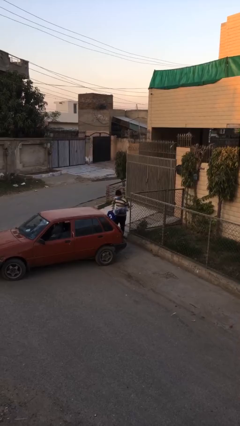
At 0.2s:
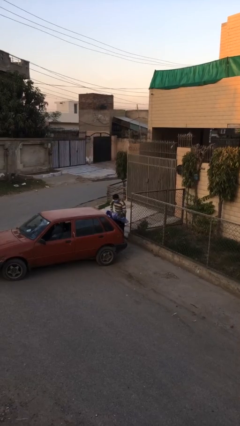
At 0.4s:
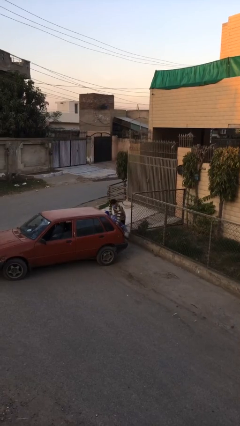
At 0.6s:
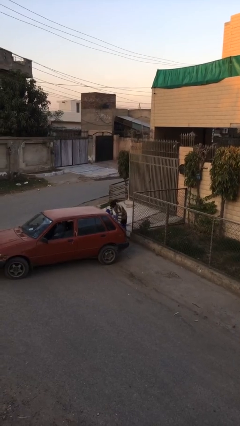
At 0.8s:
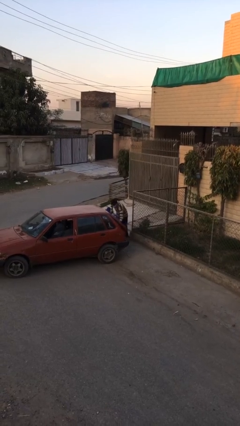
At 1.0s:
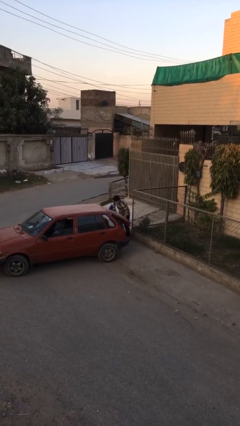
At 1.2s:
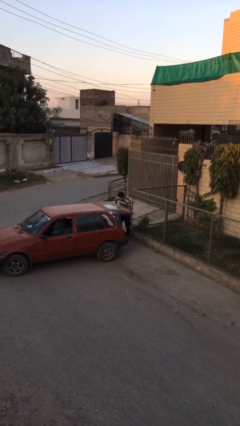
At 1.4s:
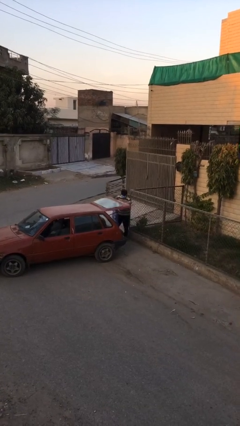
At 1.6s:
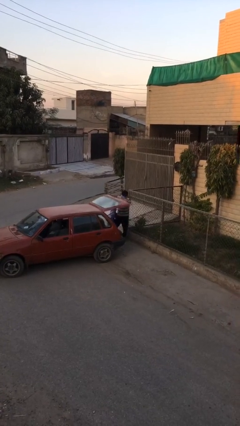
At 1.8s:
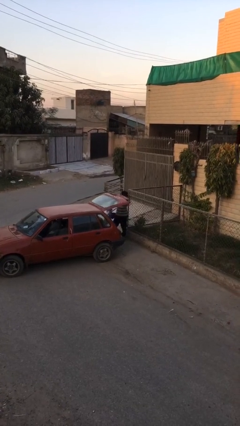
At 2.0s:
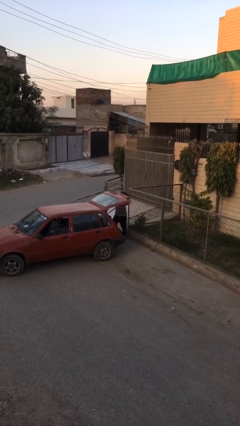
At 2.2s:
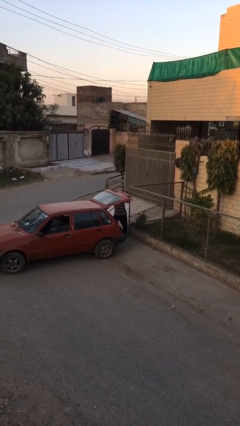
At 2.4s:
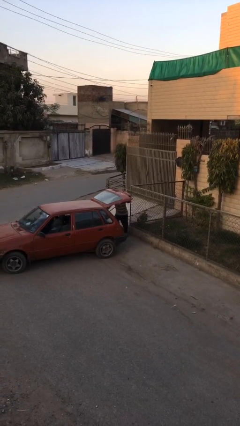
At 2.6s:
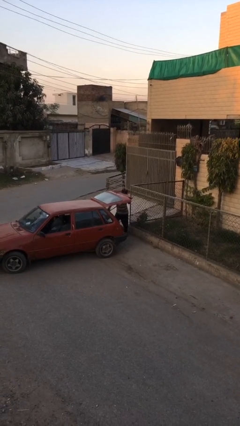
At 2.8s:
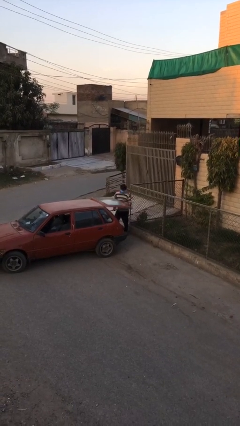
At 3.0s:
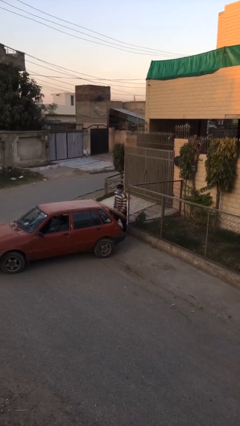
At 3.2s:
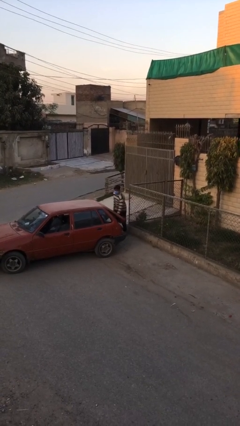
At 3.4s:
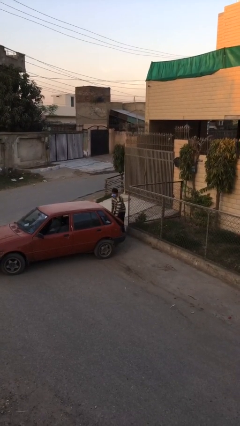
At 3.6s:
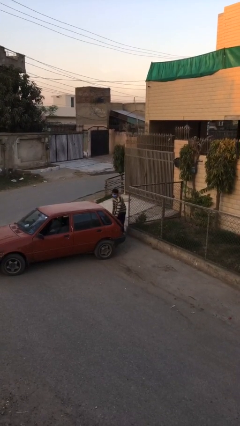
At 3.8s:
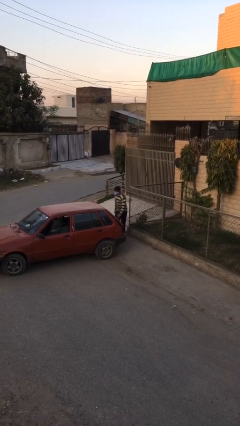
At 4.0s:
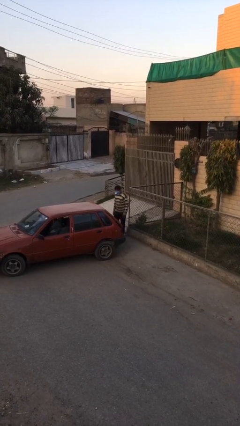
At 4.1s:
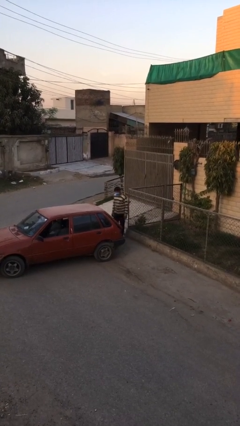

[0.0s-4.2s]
person loads car

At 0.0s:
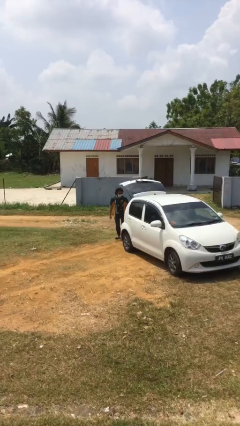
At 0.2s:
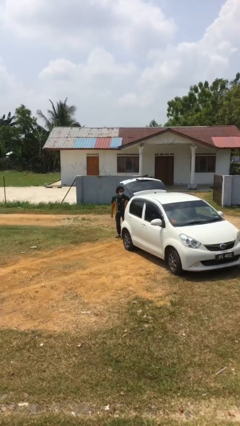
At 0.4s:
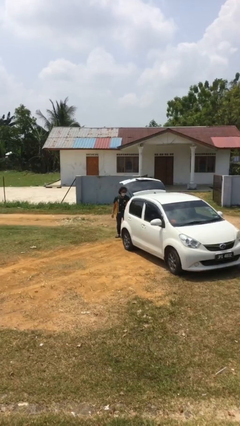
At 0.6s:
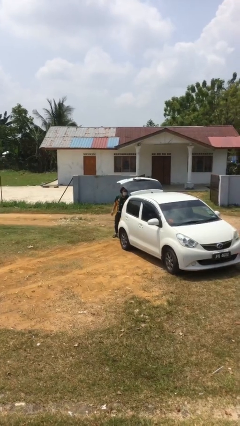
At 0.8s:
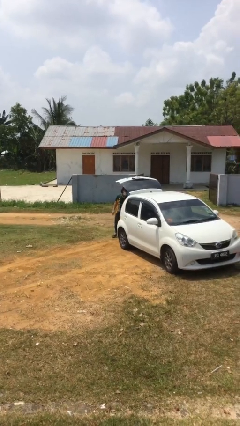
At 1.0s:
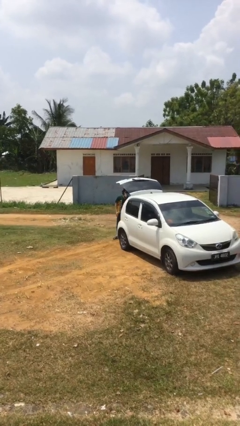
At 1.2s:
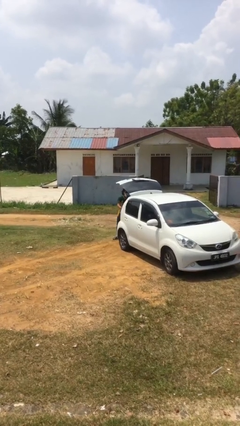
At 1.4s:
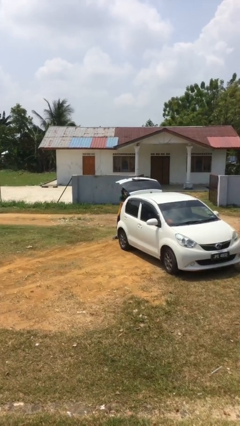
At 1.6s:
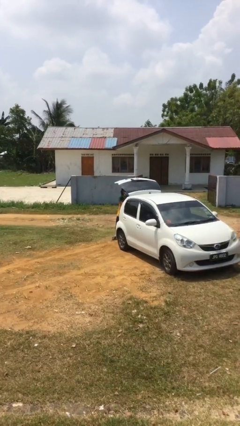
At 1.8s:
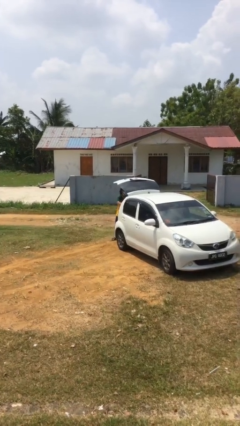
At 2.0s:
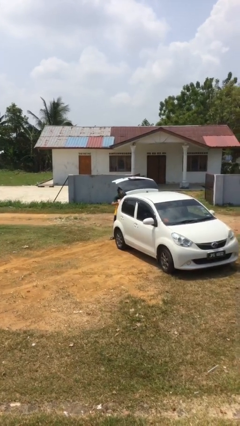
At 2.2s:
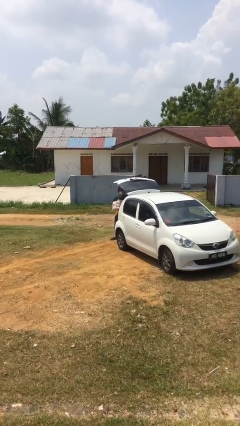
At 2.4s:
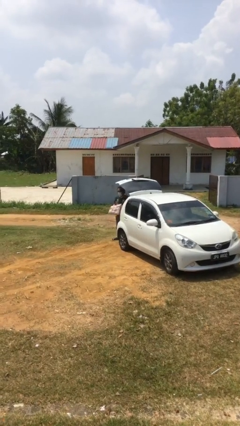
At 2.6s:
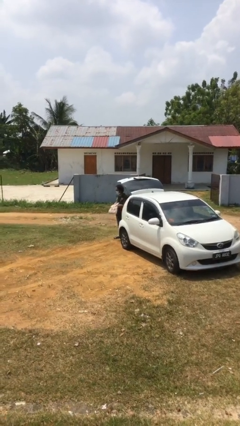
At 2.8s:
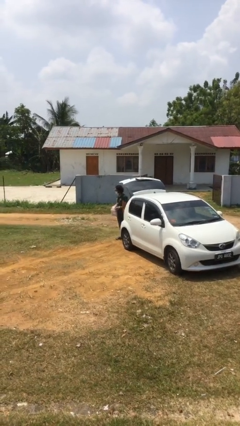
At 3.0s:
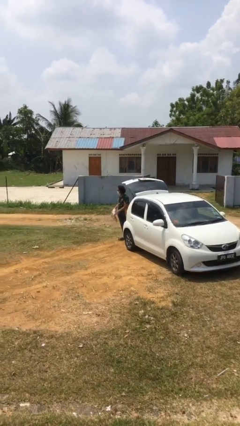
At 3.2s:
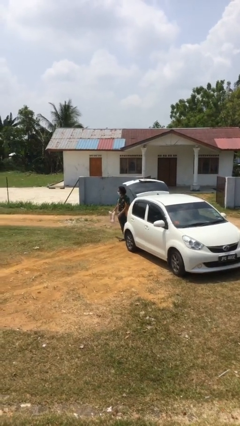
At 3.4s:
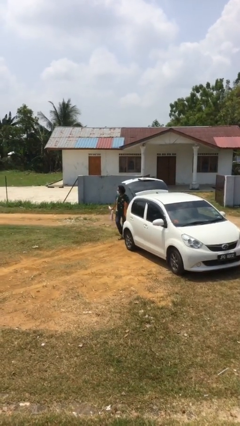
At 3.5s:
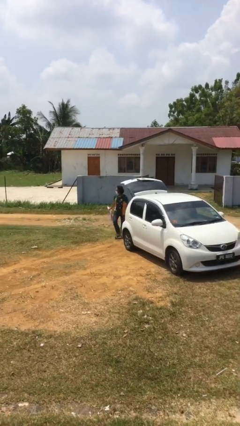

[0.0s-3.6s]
person unloads car

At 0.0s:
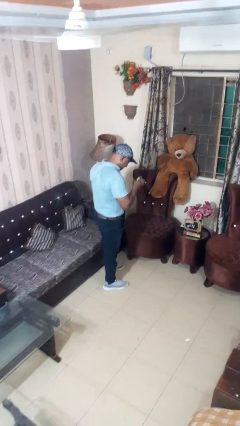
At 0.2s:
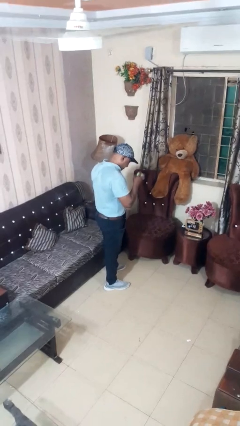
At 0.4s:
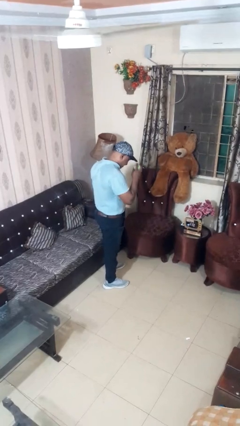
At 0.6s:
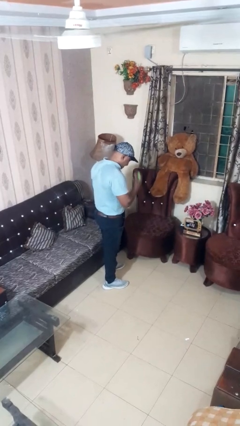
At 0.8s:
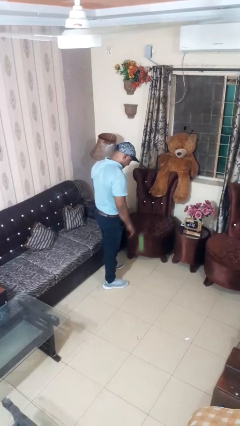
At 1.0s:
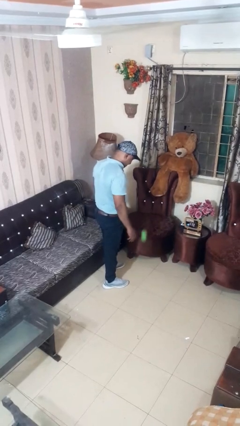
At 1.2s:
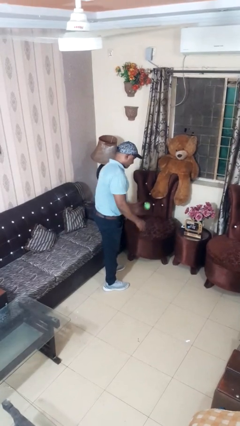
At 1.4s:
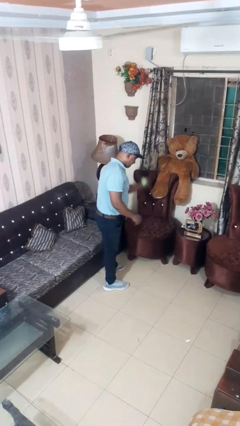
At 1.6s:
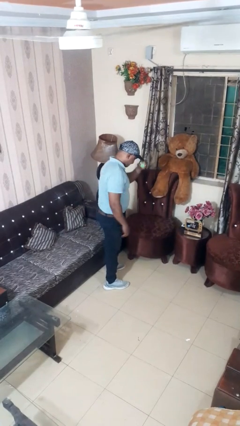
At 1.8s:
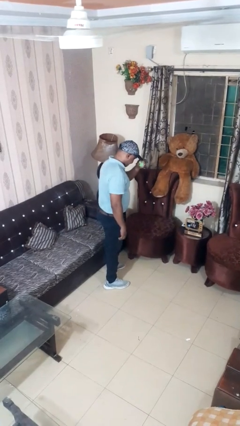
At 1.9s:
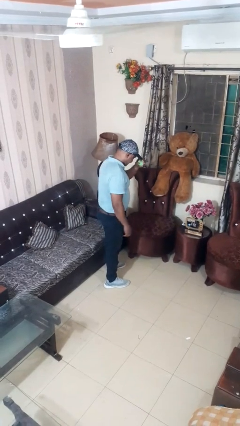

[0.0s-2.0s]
person bounces ball on floor

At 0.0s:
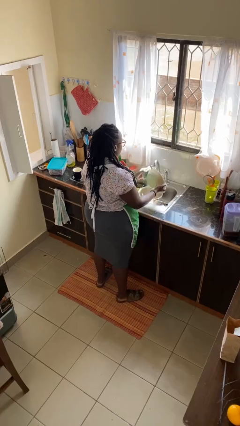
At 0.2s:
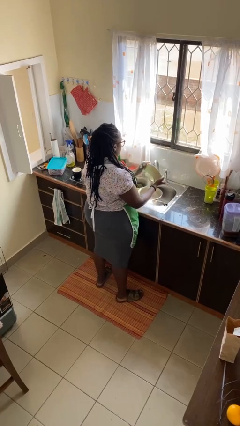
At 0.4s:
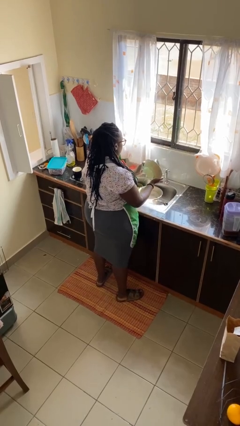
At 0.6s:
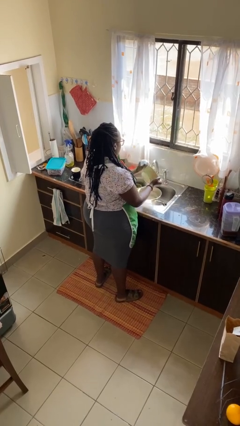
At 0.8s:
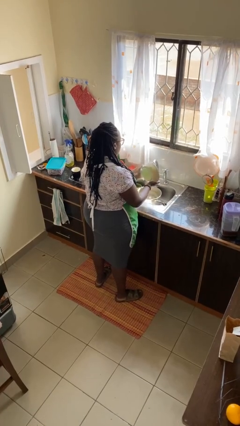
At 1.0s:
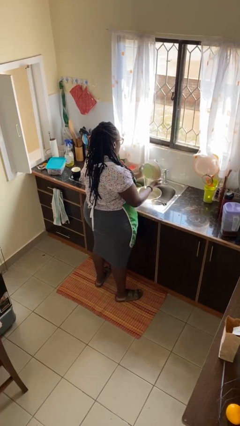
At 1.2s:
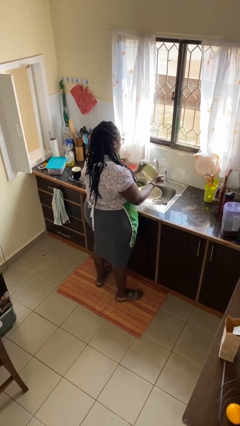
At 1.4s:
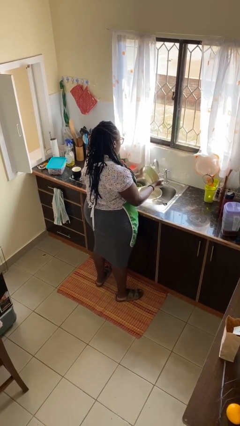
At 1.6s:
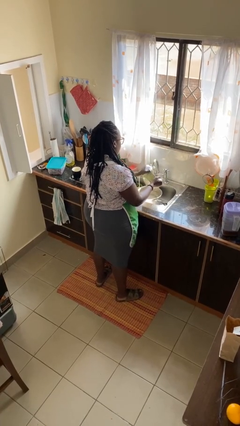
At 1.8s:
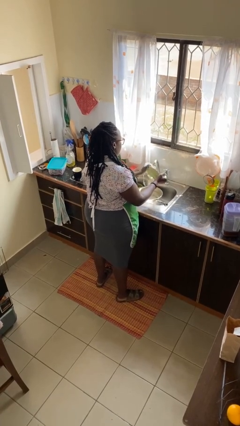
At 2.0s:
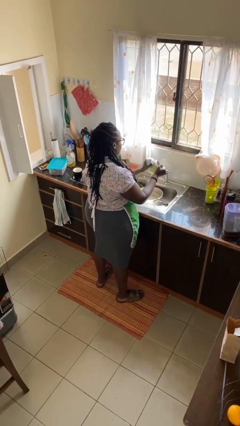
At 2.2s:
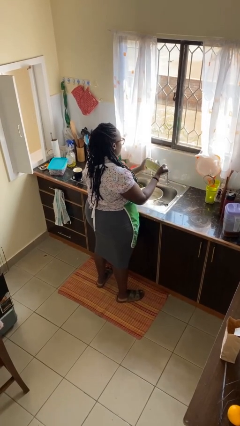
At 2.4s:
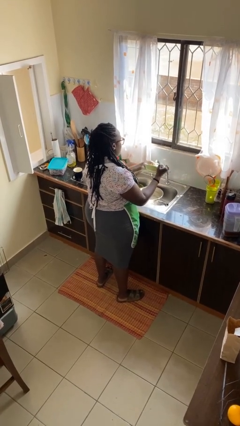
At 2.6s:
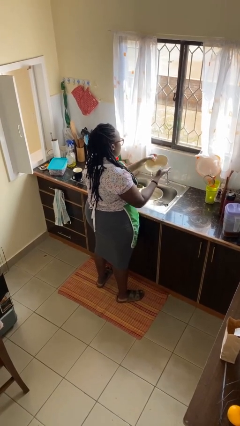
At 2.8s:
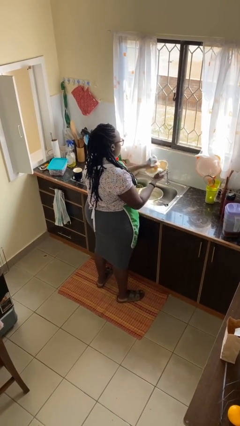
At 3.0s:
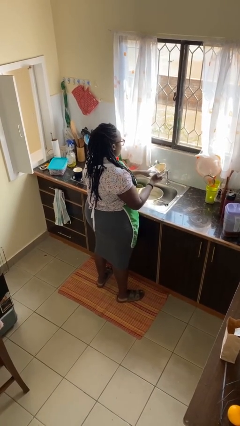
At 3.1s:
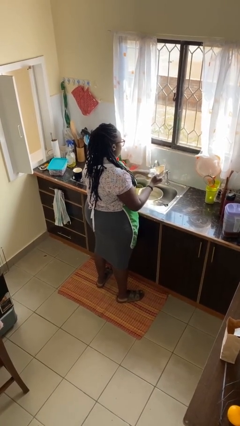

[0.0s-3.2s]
person washes dish

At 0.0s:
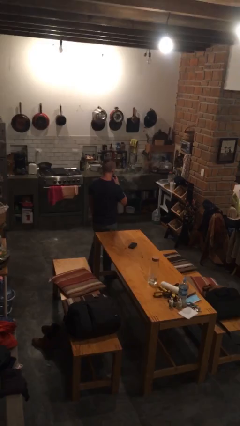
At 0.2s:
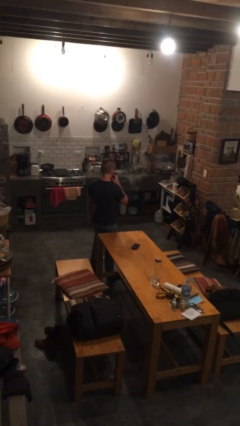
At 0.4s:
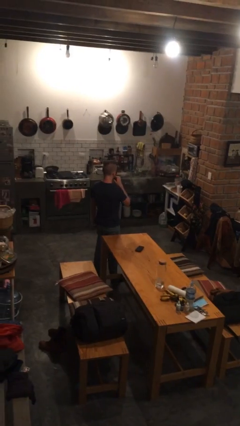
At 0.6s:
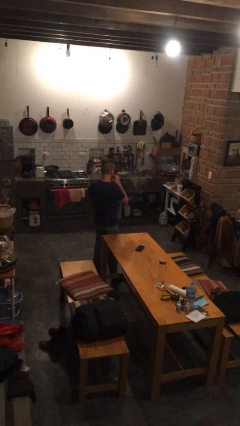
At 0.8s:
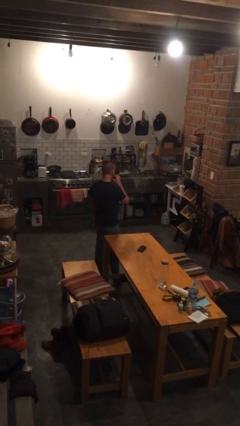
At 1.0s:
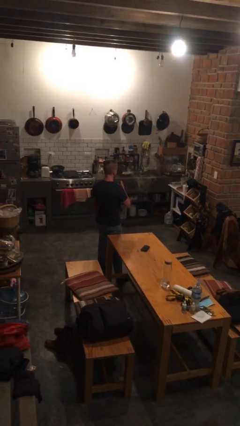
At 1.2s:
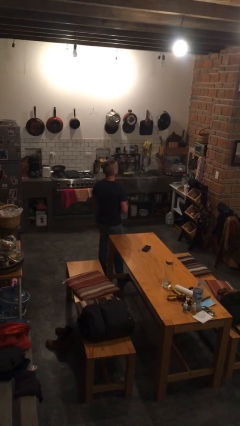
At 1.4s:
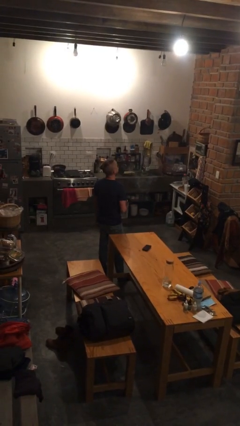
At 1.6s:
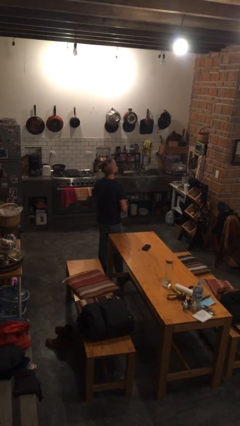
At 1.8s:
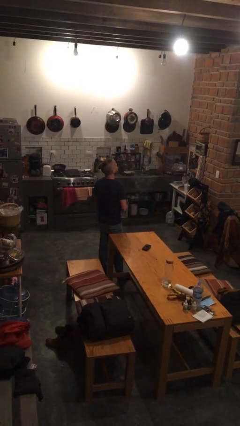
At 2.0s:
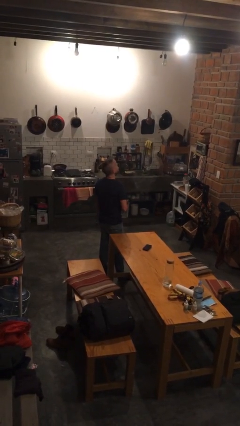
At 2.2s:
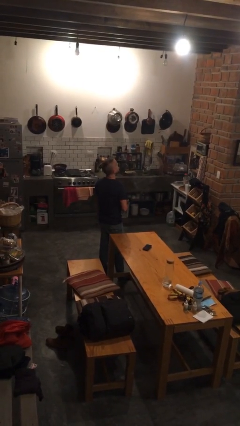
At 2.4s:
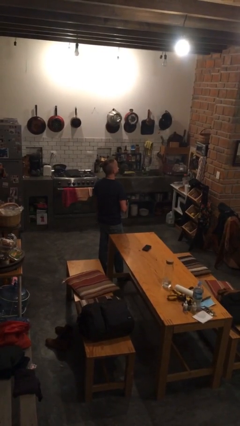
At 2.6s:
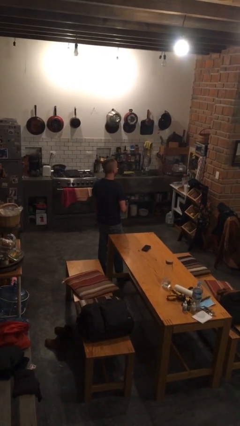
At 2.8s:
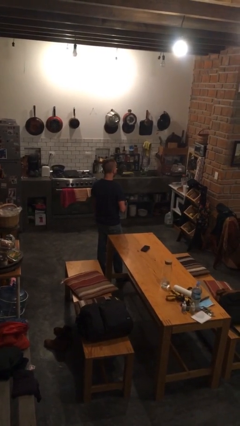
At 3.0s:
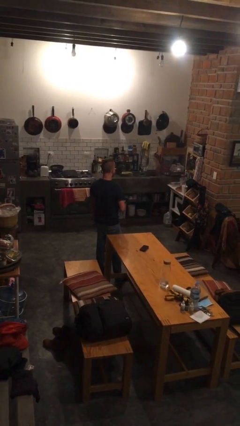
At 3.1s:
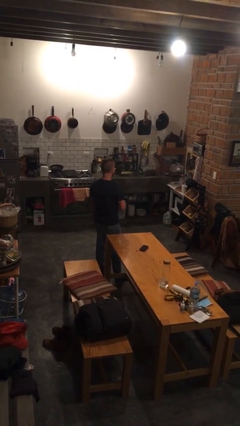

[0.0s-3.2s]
person vapes

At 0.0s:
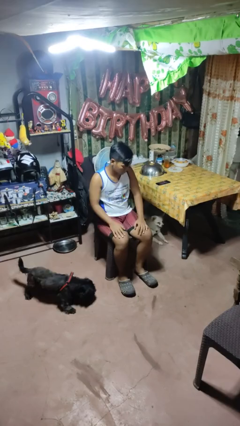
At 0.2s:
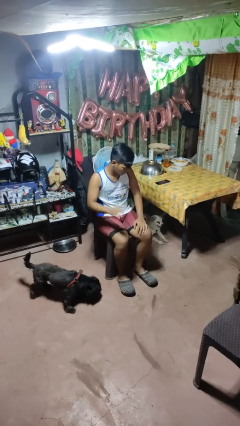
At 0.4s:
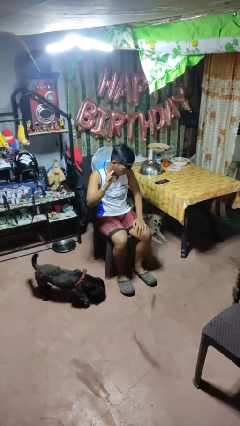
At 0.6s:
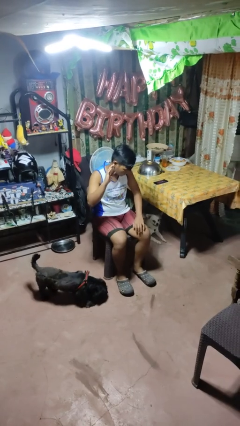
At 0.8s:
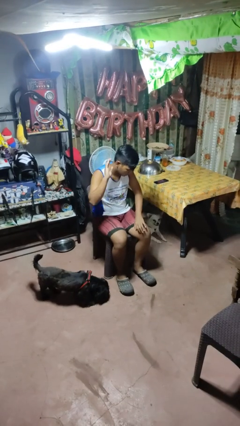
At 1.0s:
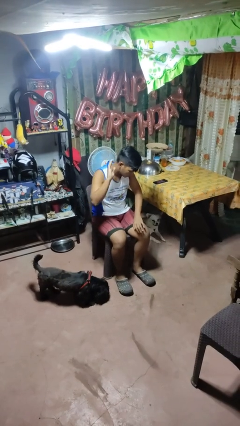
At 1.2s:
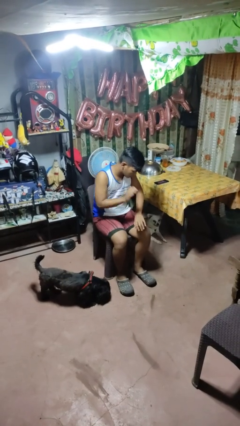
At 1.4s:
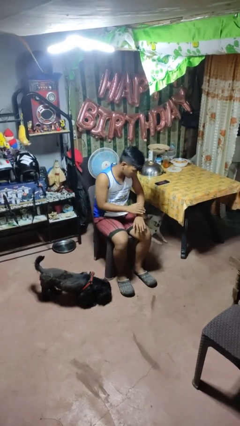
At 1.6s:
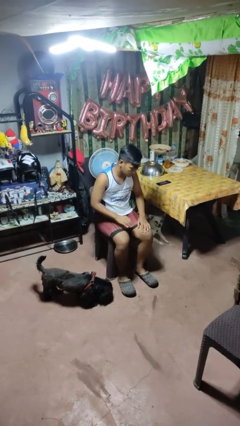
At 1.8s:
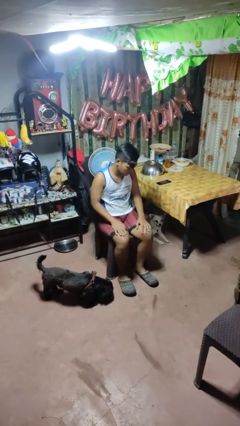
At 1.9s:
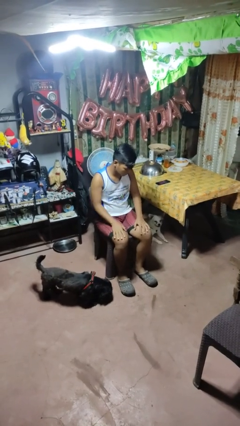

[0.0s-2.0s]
person swats bug
